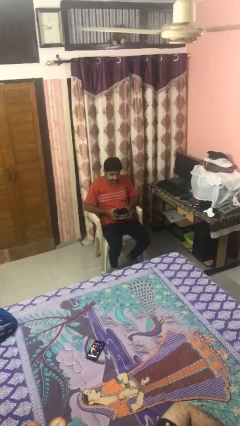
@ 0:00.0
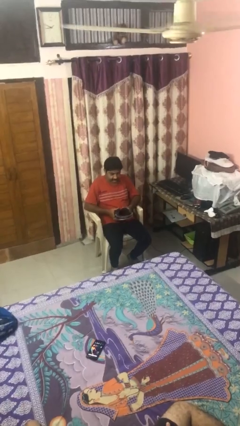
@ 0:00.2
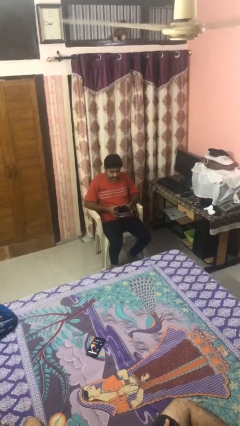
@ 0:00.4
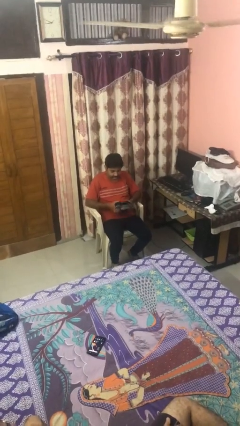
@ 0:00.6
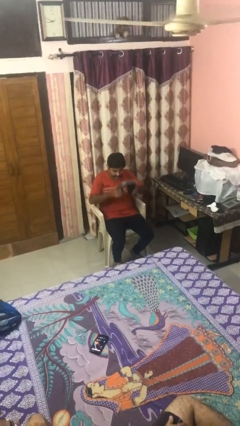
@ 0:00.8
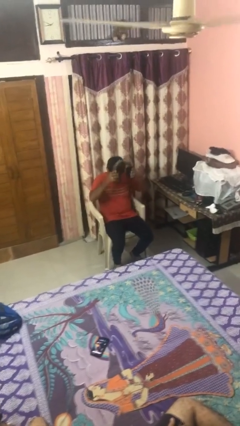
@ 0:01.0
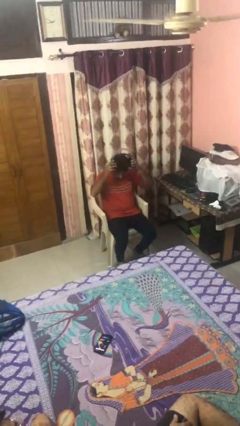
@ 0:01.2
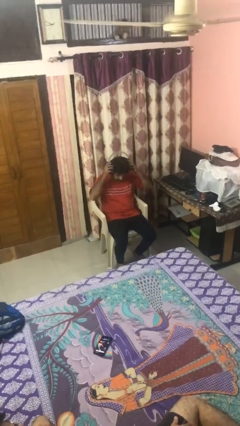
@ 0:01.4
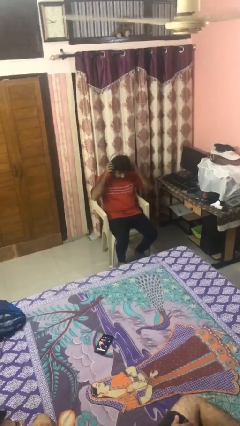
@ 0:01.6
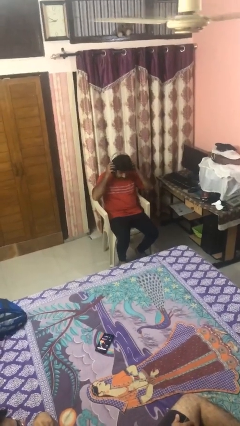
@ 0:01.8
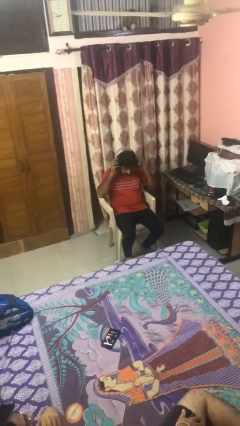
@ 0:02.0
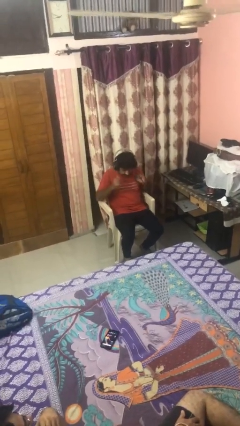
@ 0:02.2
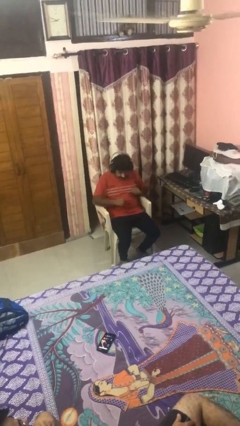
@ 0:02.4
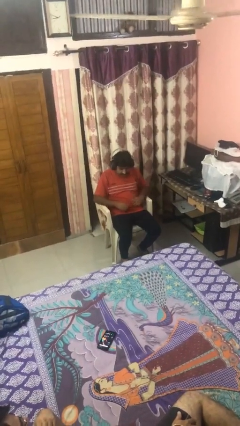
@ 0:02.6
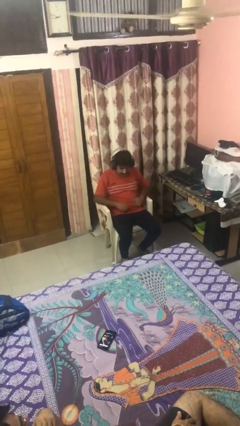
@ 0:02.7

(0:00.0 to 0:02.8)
person puts on headphones

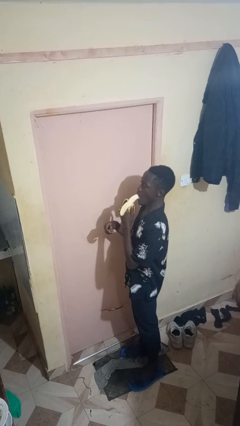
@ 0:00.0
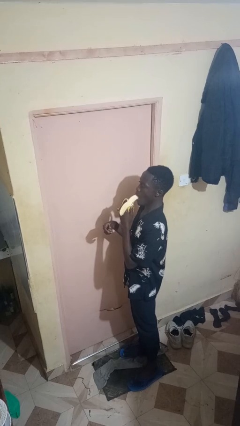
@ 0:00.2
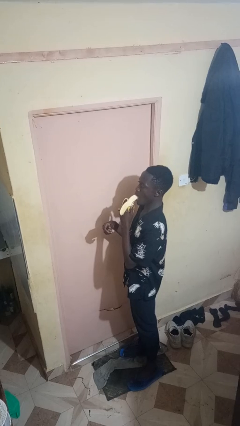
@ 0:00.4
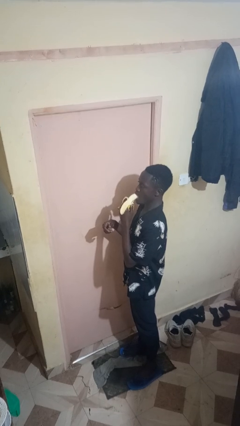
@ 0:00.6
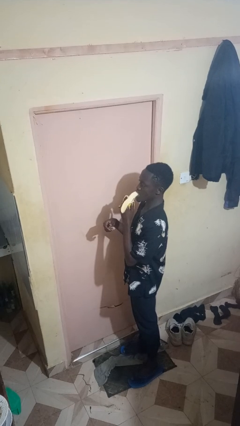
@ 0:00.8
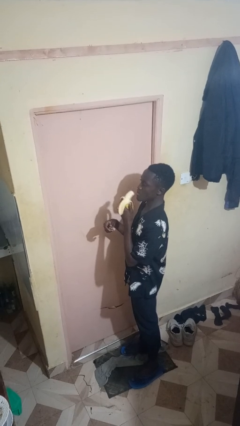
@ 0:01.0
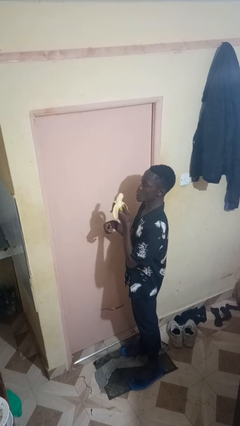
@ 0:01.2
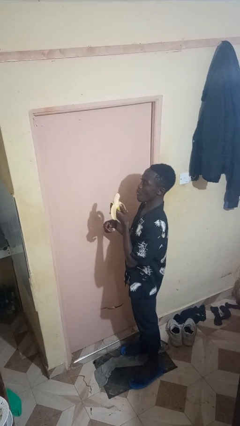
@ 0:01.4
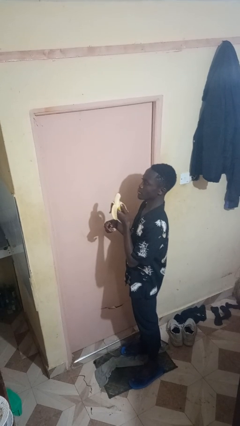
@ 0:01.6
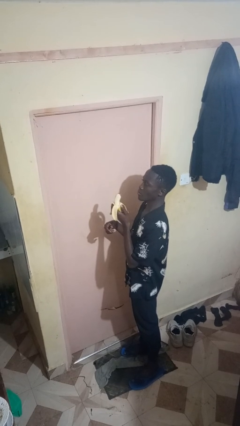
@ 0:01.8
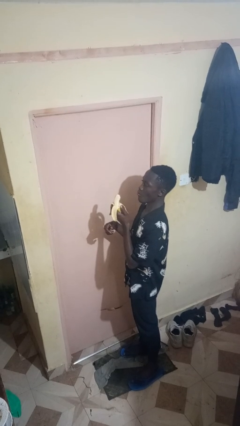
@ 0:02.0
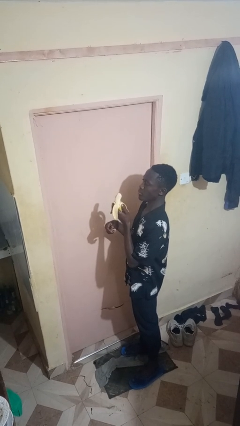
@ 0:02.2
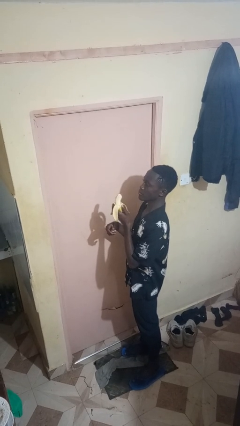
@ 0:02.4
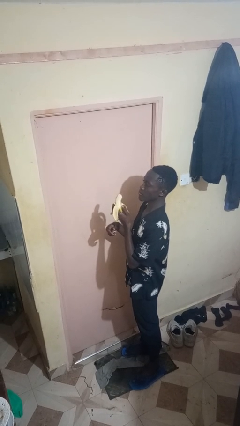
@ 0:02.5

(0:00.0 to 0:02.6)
person eats banana

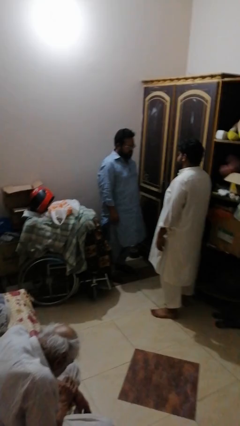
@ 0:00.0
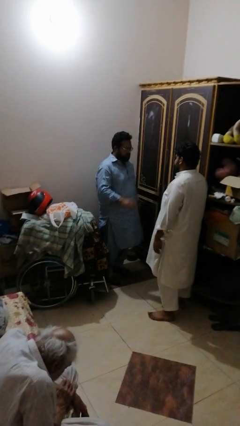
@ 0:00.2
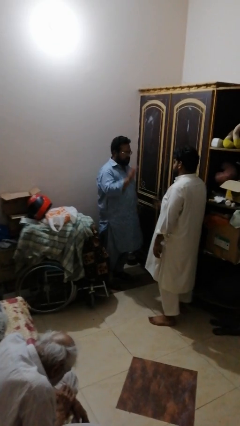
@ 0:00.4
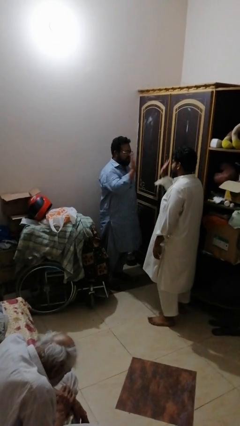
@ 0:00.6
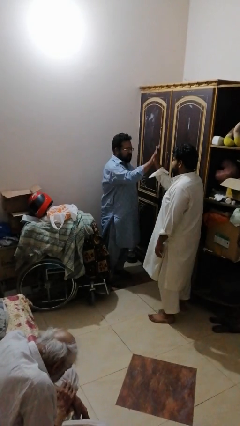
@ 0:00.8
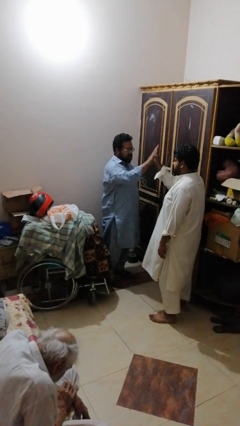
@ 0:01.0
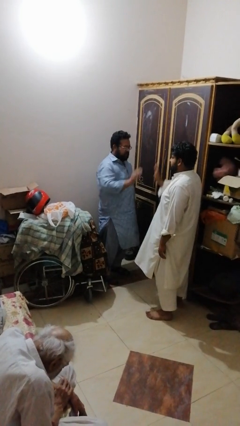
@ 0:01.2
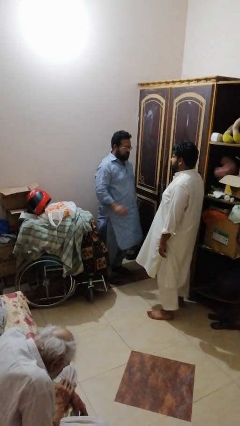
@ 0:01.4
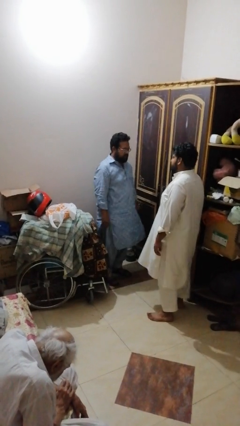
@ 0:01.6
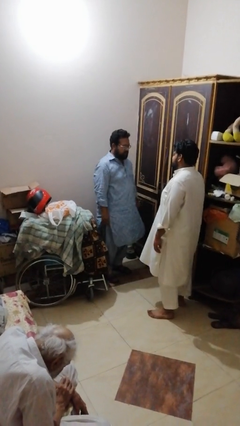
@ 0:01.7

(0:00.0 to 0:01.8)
person highfives hand

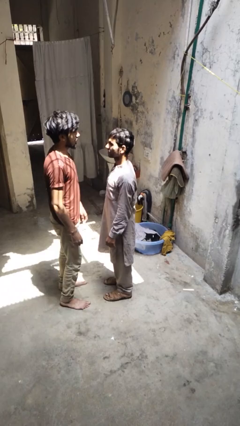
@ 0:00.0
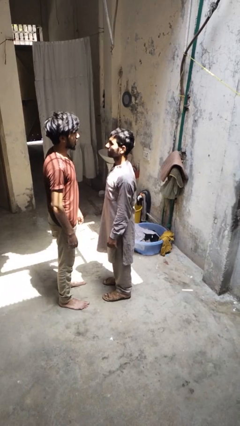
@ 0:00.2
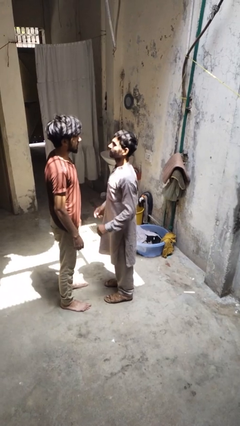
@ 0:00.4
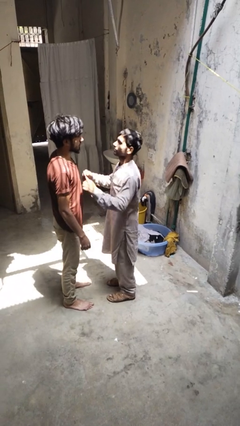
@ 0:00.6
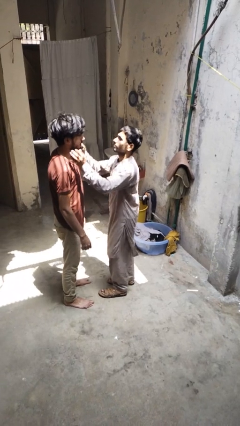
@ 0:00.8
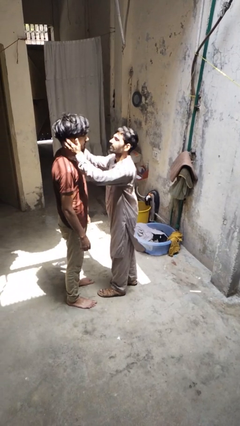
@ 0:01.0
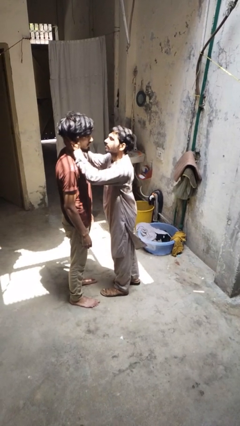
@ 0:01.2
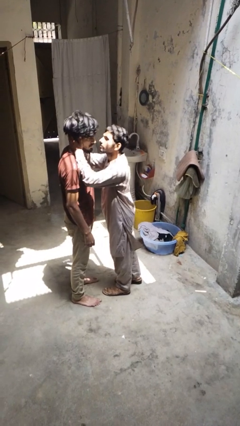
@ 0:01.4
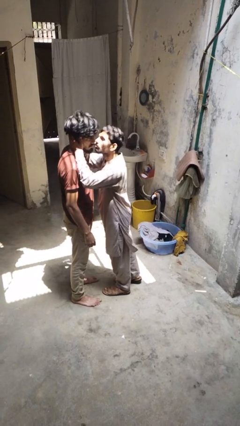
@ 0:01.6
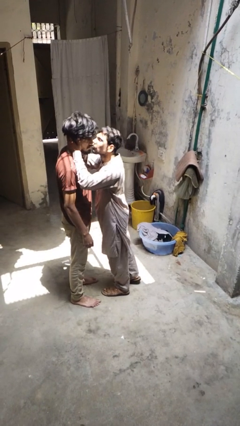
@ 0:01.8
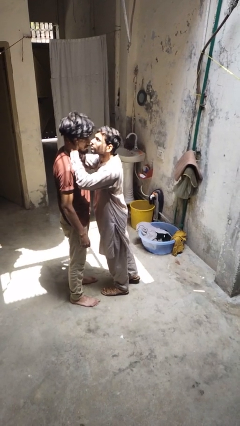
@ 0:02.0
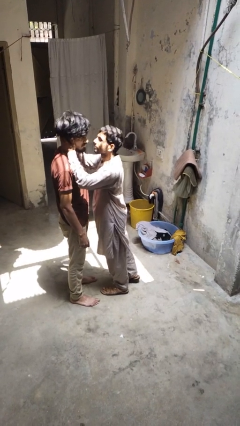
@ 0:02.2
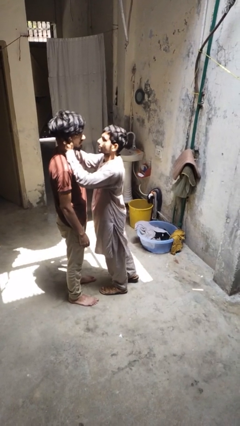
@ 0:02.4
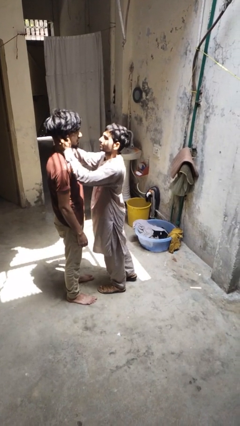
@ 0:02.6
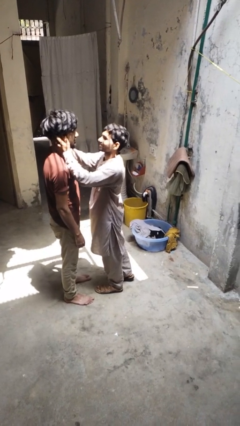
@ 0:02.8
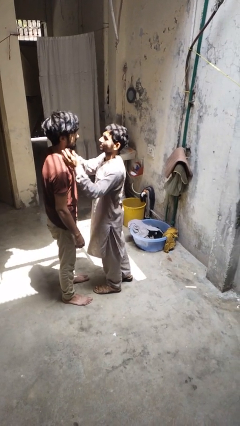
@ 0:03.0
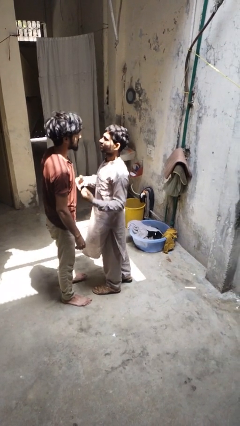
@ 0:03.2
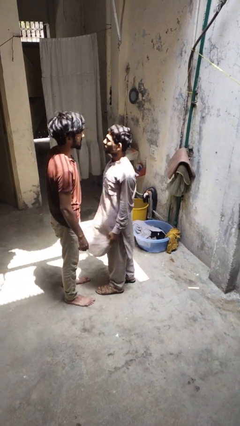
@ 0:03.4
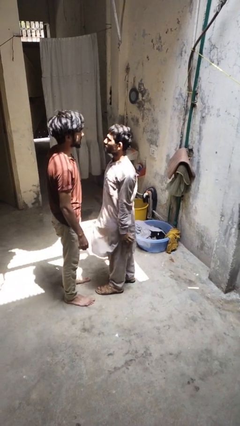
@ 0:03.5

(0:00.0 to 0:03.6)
person kisses cheek of person

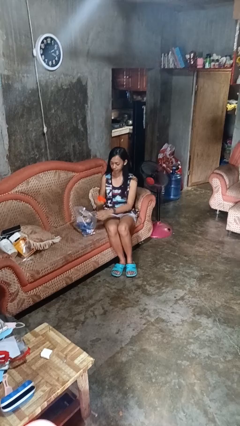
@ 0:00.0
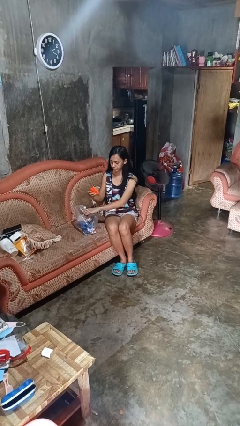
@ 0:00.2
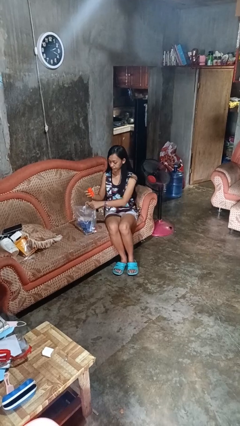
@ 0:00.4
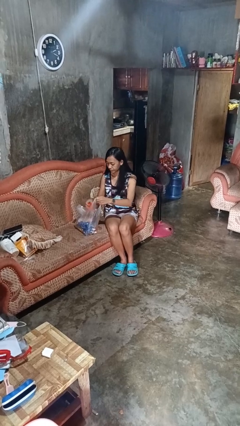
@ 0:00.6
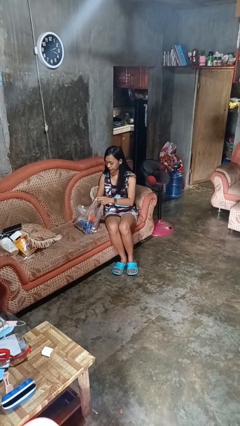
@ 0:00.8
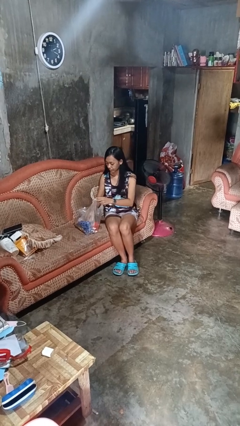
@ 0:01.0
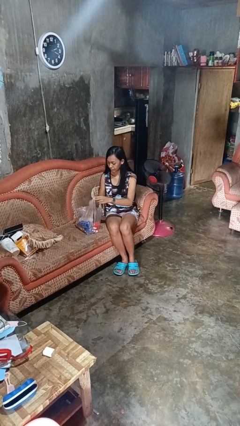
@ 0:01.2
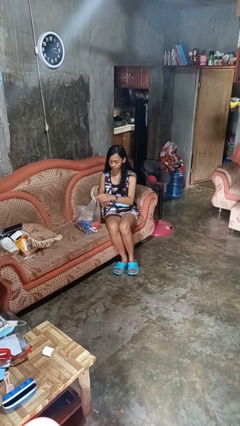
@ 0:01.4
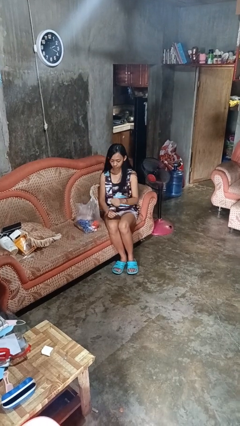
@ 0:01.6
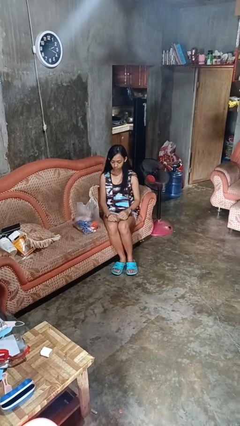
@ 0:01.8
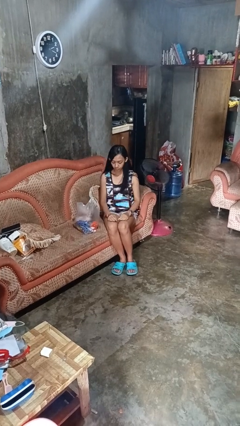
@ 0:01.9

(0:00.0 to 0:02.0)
person puts object into bag

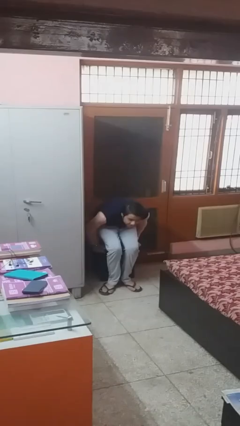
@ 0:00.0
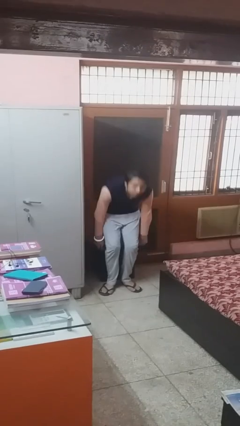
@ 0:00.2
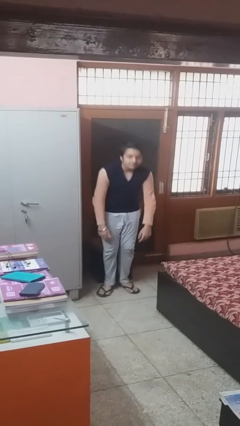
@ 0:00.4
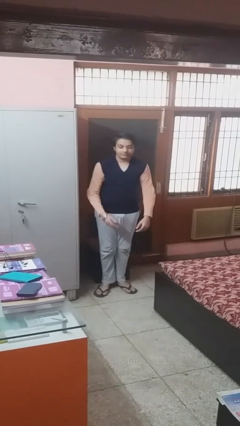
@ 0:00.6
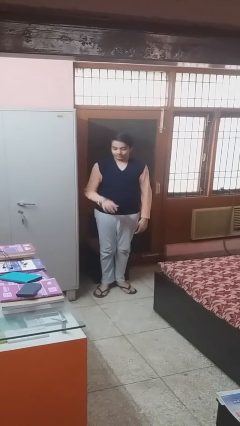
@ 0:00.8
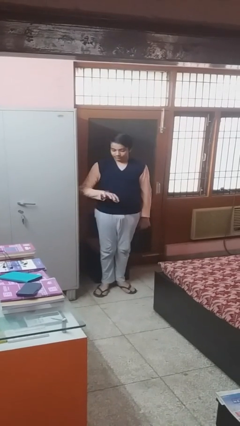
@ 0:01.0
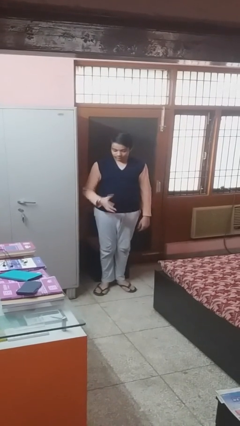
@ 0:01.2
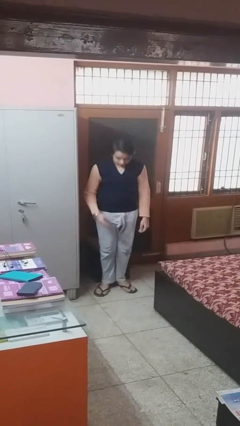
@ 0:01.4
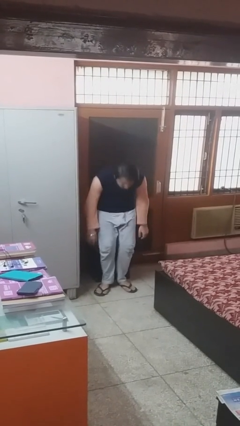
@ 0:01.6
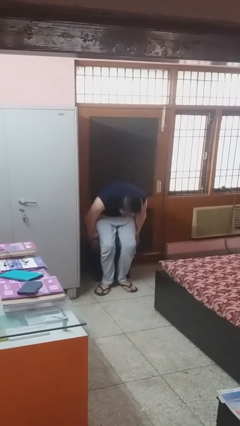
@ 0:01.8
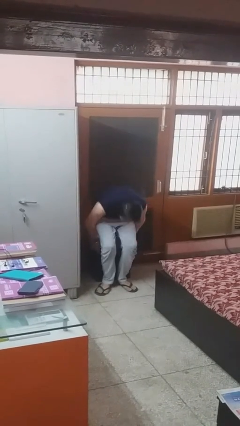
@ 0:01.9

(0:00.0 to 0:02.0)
person stands up

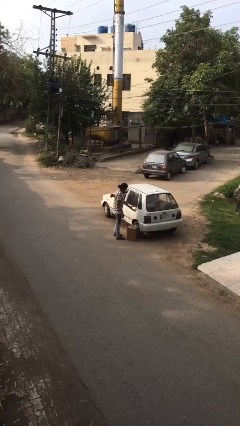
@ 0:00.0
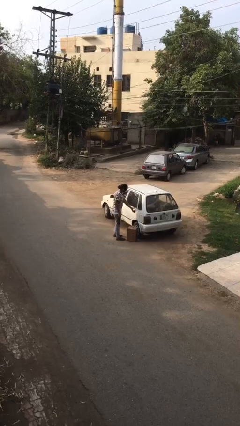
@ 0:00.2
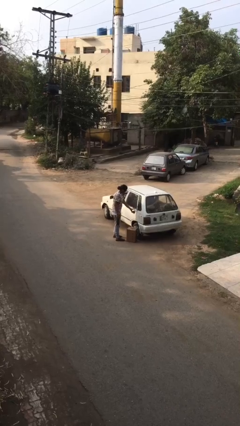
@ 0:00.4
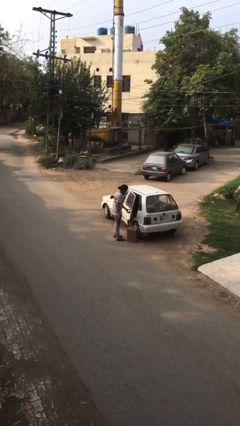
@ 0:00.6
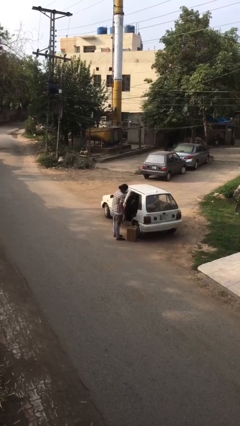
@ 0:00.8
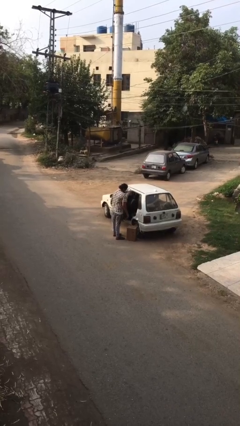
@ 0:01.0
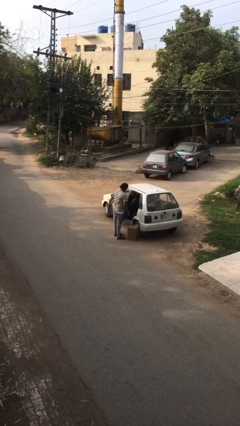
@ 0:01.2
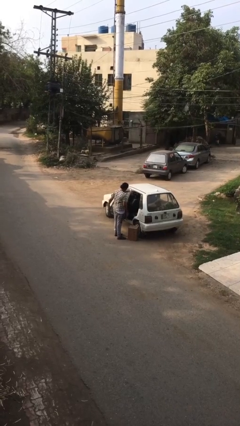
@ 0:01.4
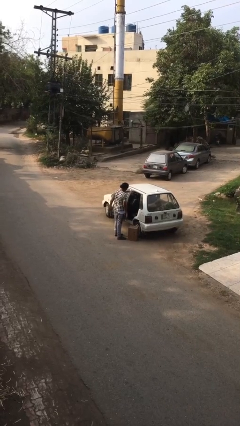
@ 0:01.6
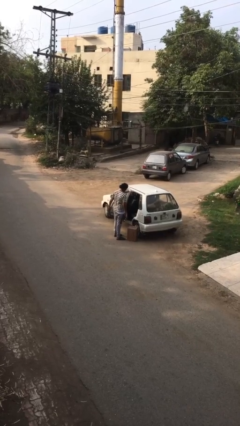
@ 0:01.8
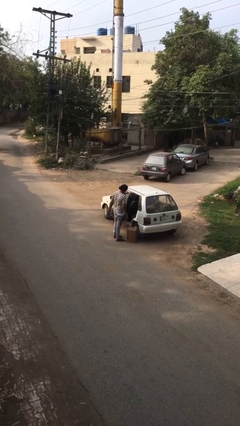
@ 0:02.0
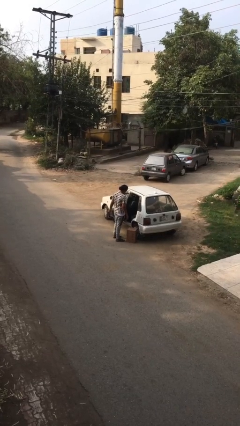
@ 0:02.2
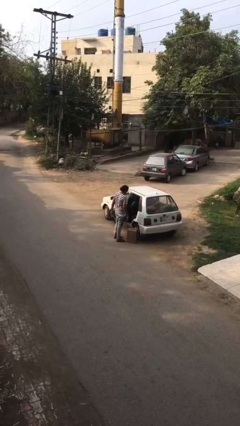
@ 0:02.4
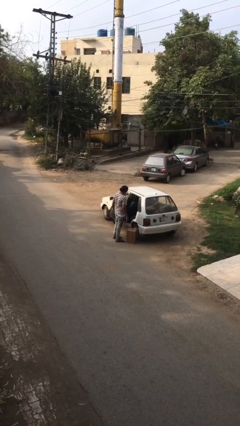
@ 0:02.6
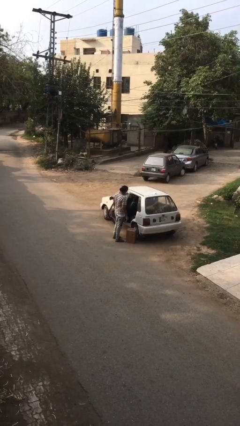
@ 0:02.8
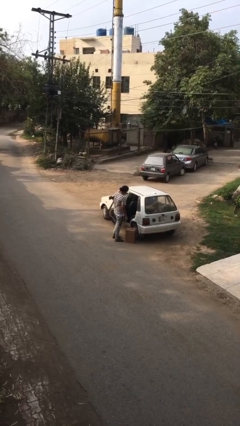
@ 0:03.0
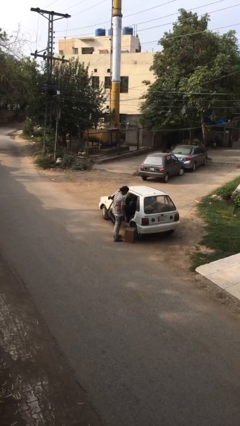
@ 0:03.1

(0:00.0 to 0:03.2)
person opens car door
